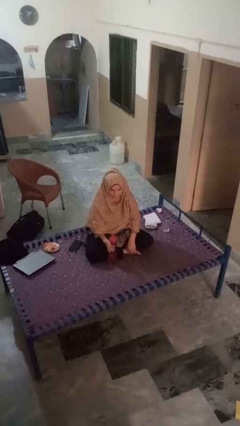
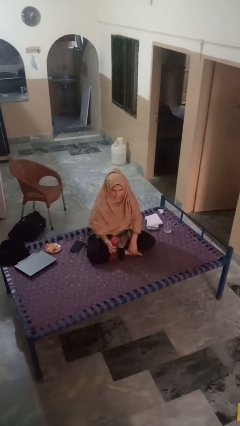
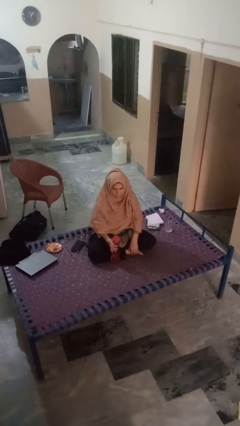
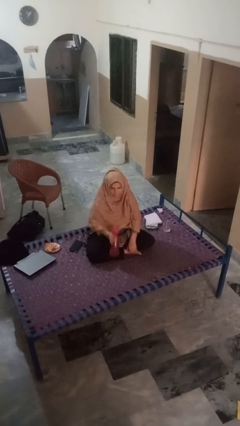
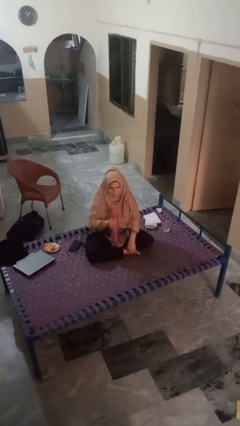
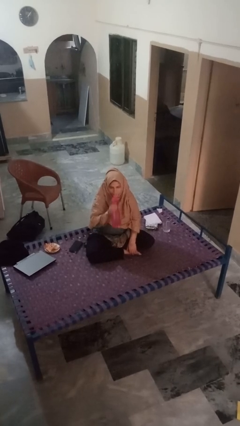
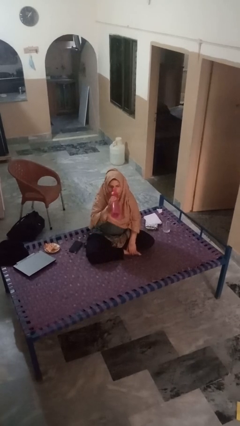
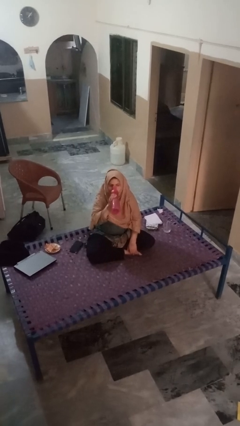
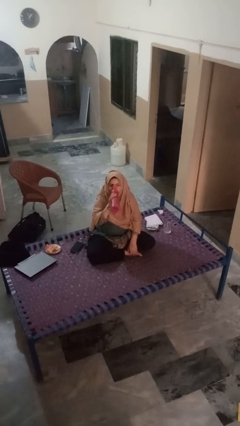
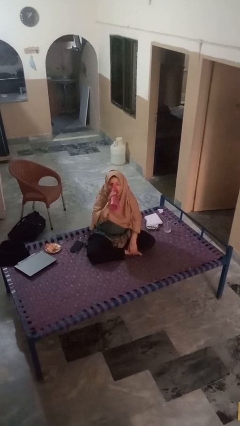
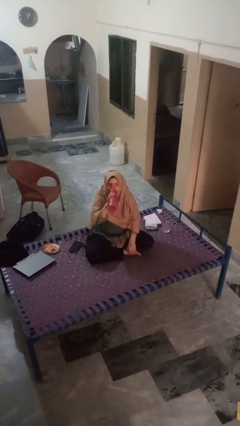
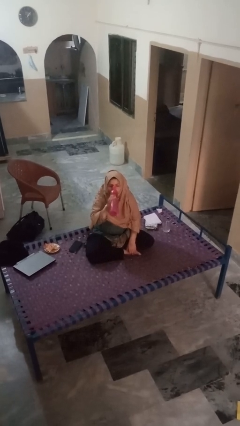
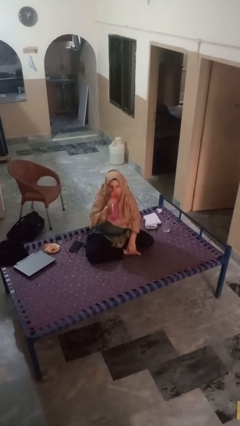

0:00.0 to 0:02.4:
person drinks from bottle

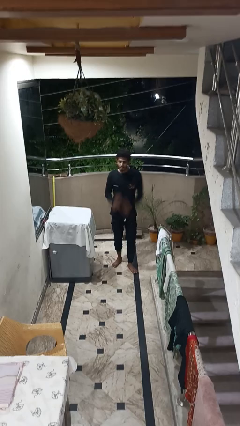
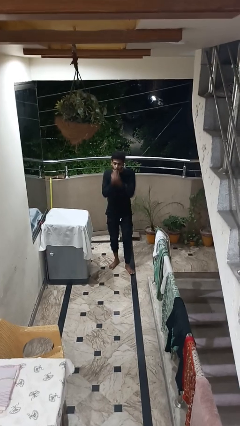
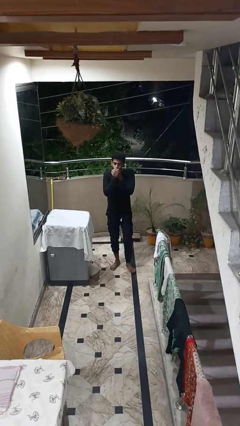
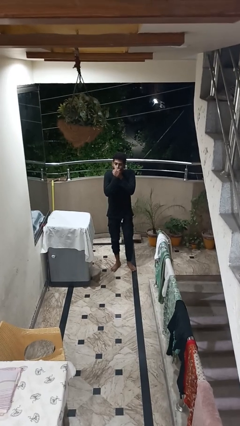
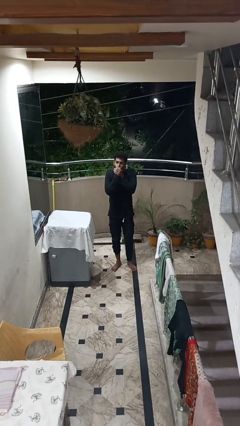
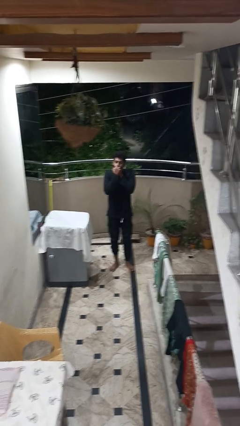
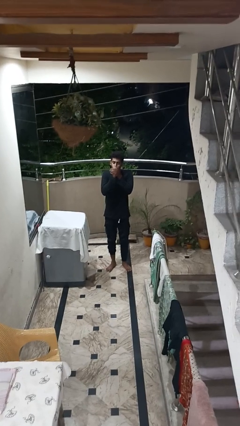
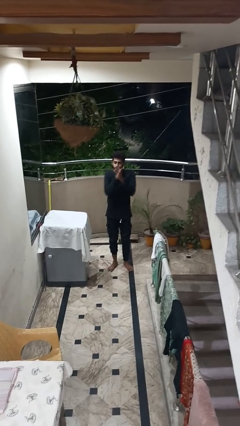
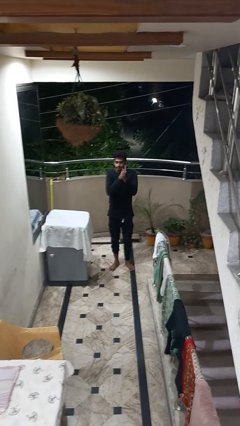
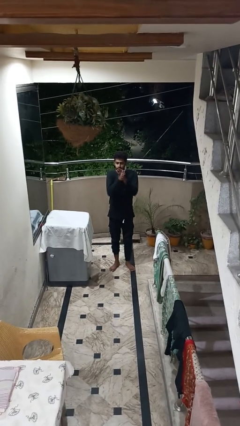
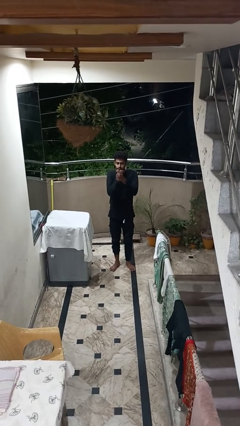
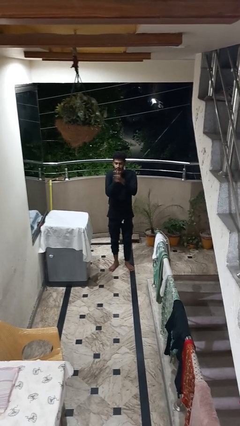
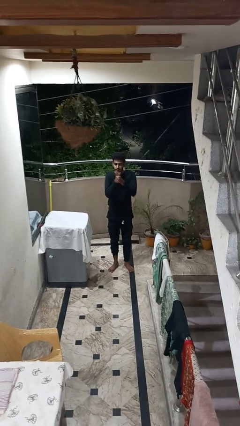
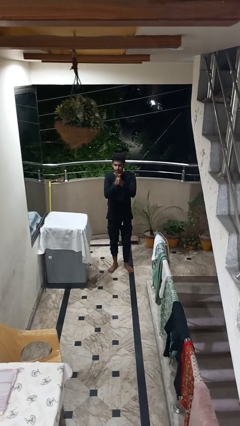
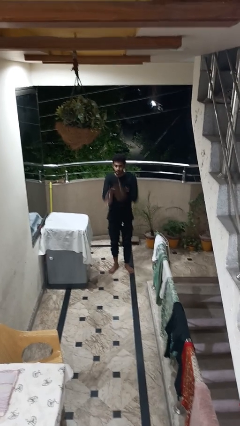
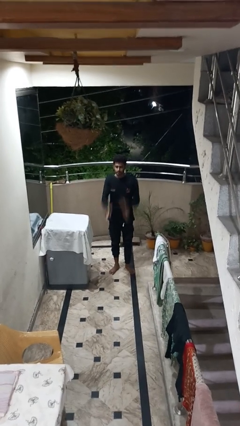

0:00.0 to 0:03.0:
person blows into hands

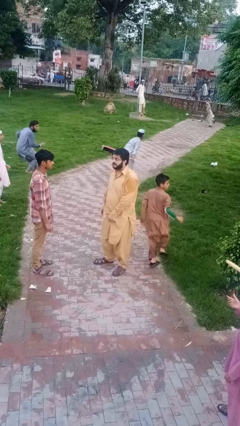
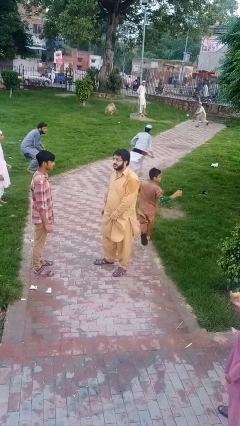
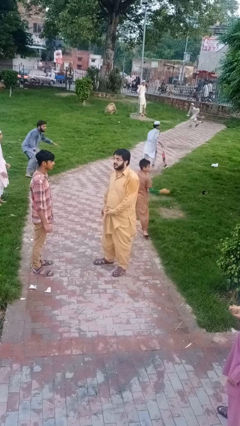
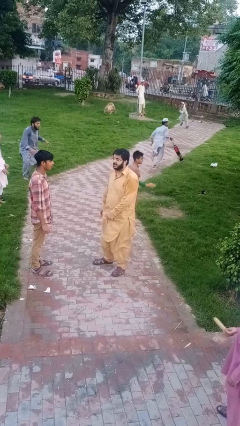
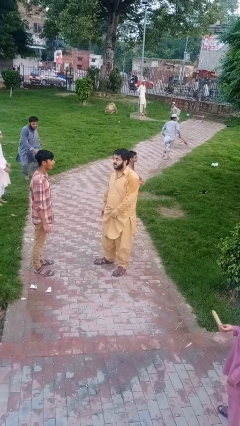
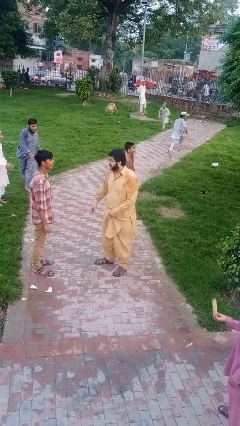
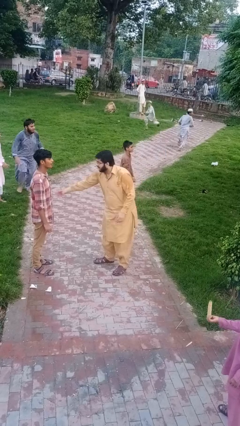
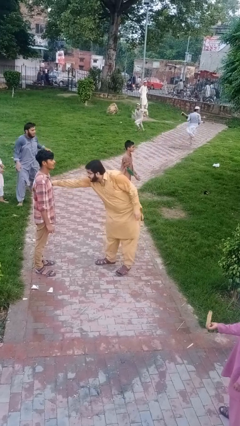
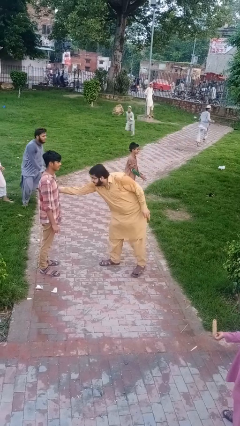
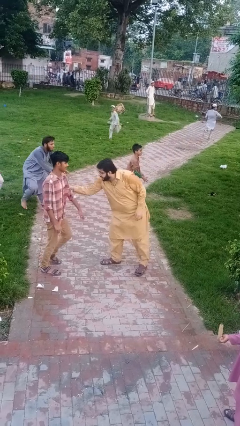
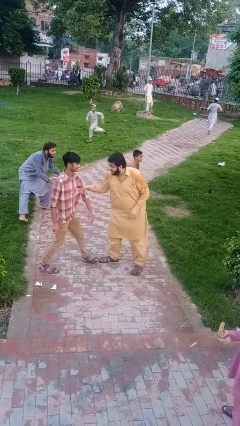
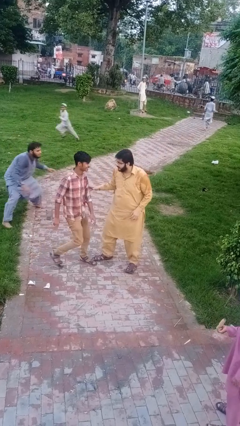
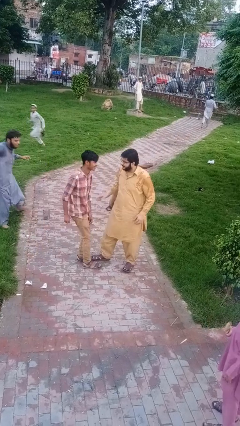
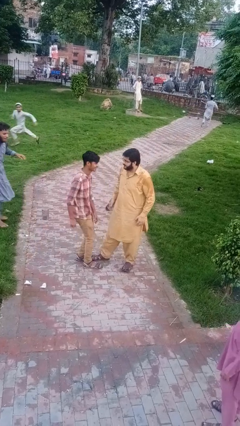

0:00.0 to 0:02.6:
person grabs person by bicep

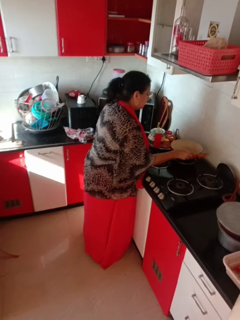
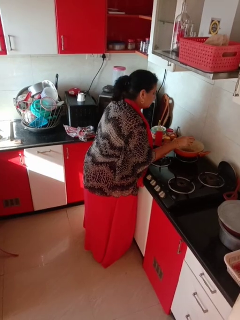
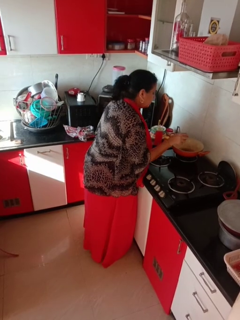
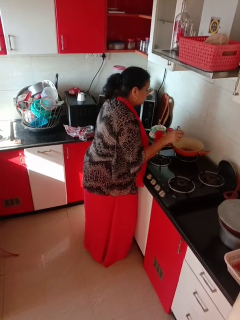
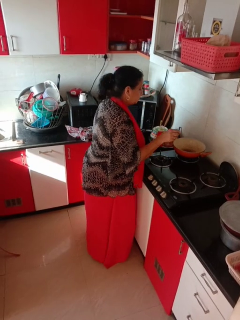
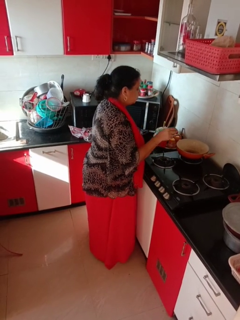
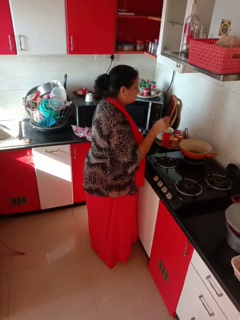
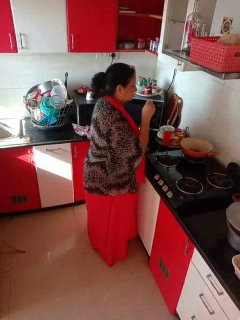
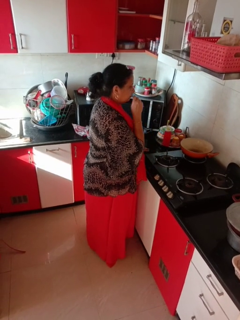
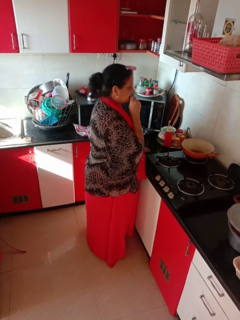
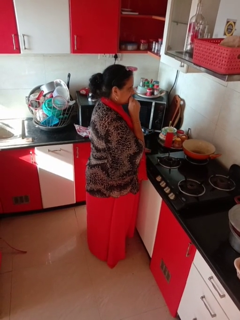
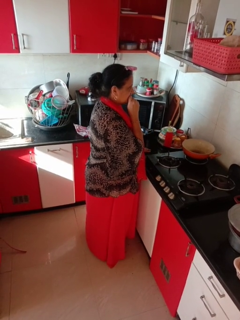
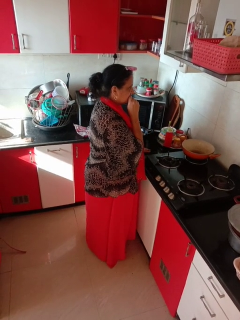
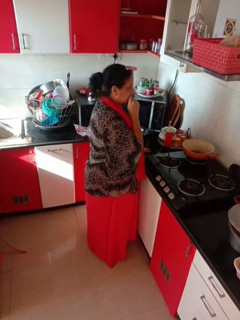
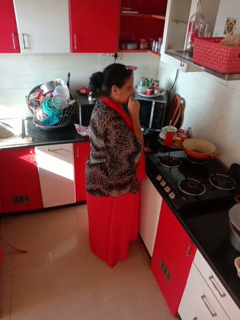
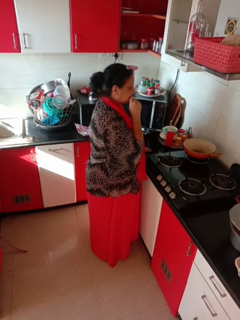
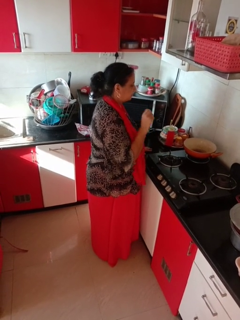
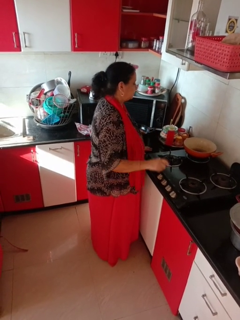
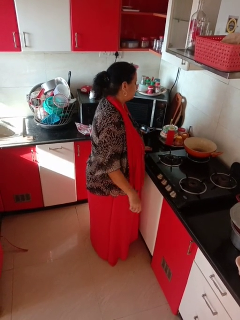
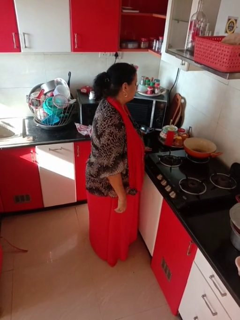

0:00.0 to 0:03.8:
person burns hand

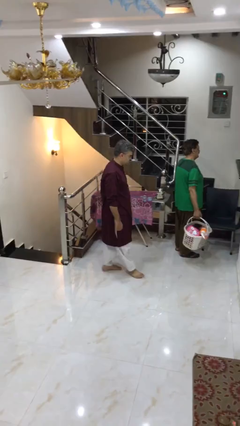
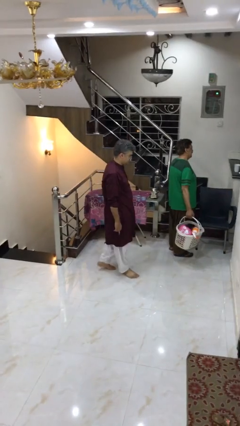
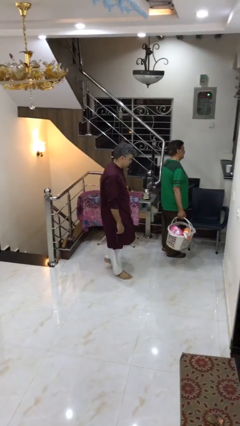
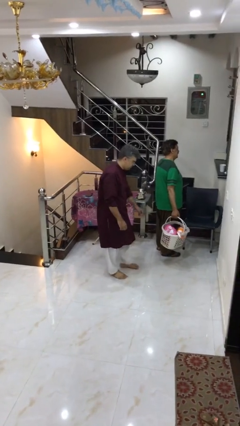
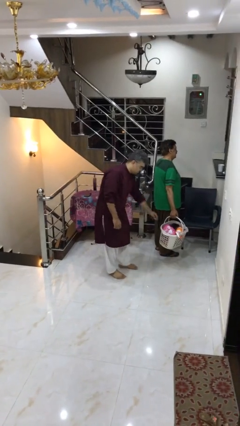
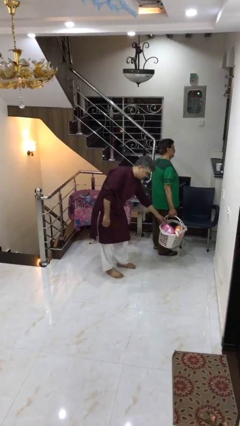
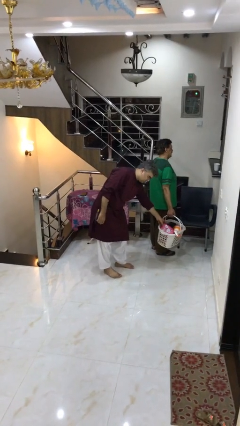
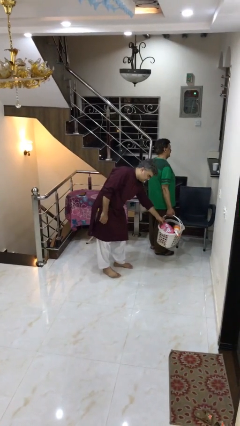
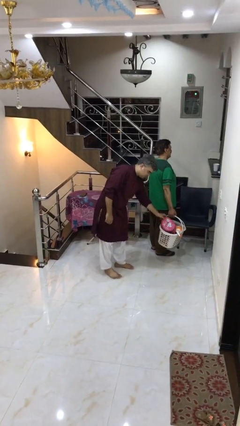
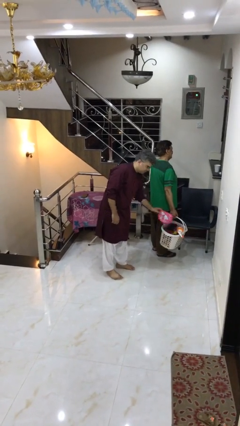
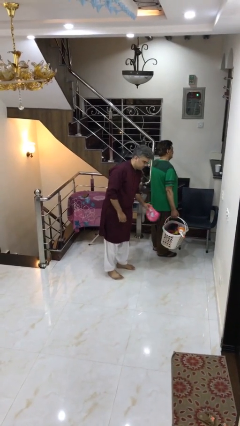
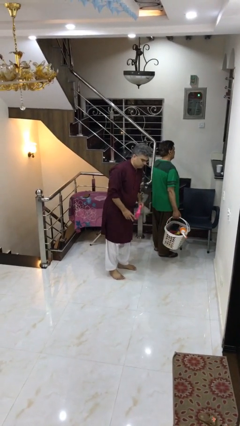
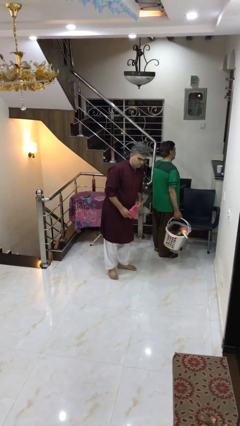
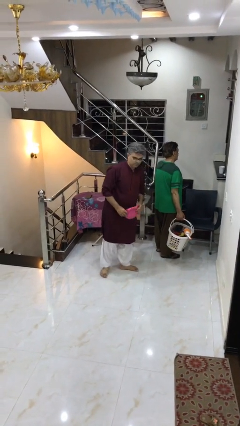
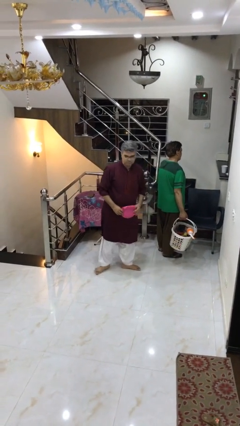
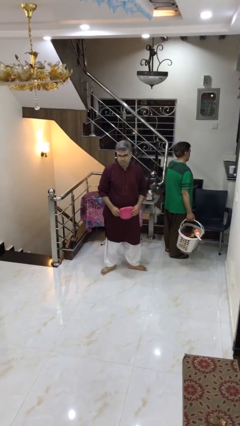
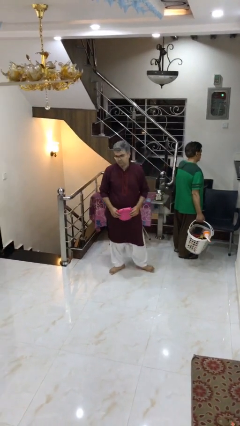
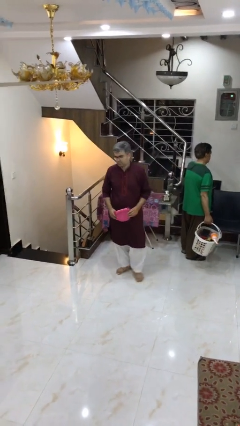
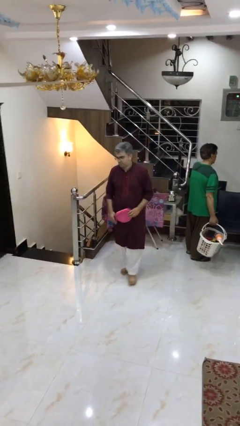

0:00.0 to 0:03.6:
person steals object from person

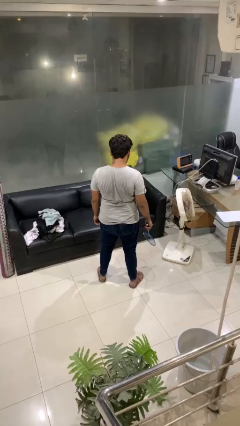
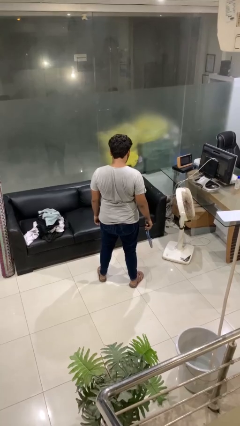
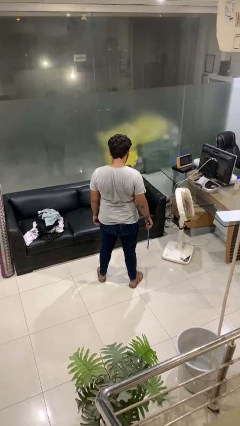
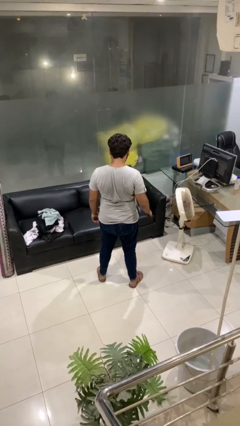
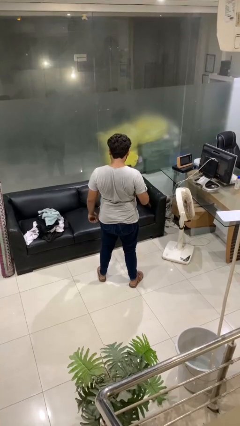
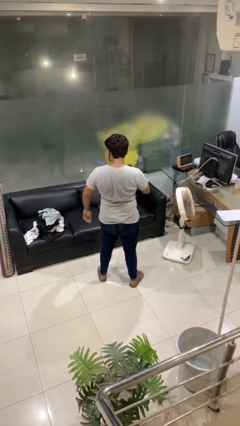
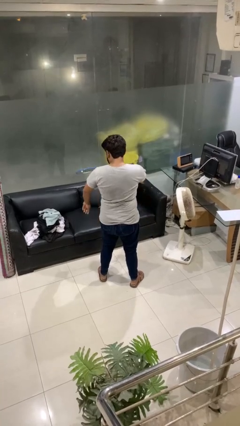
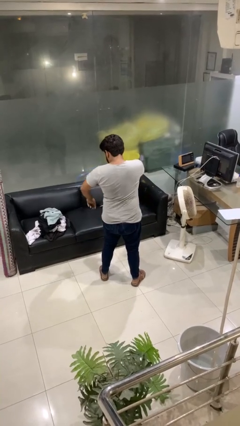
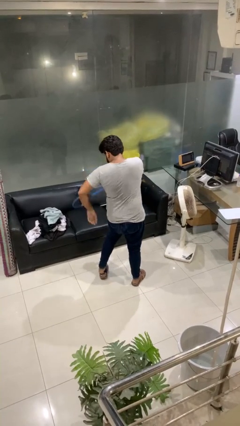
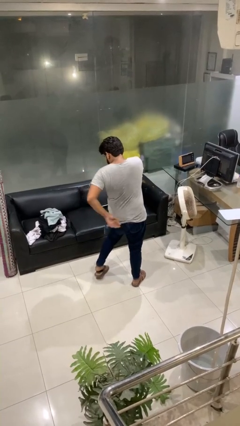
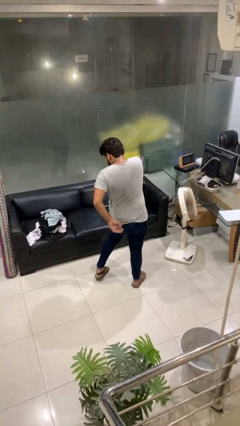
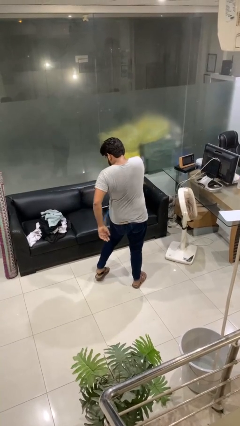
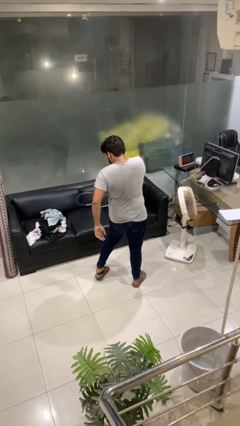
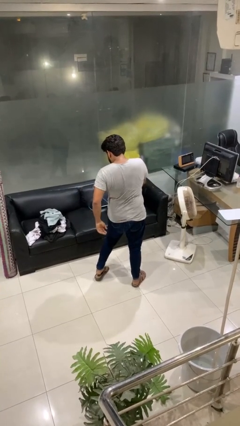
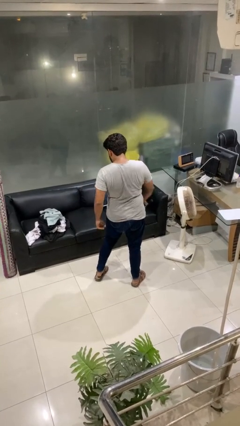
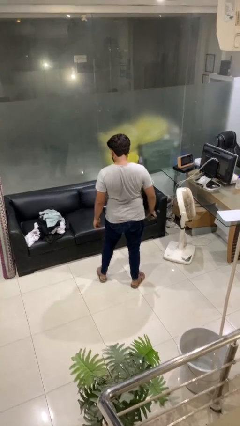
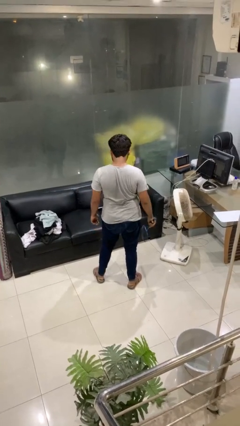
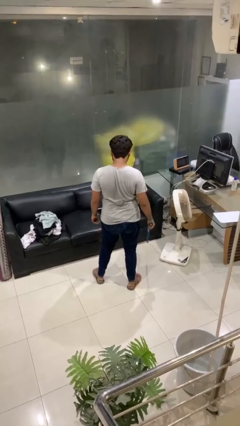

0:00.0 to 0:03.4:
person swats bug
